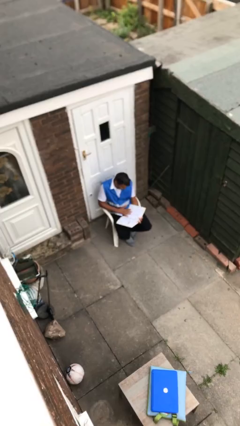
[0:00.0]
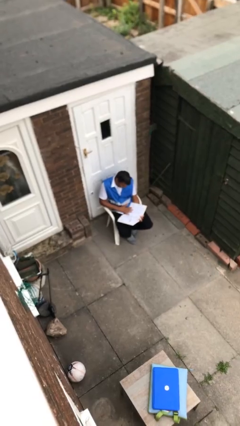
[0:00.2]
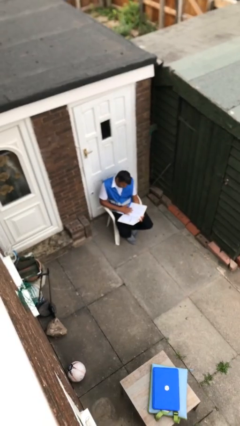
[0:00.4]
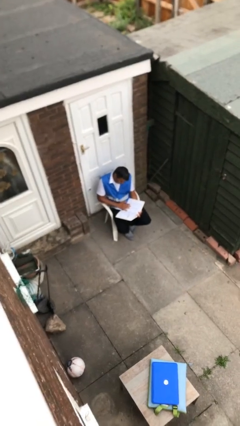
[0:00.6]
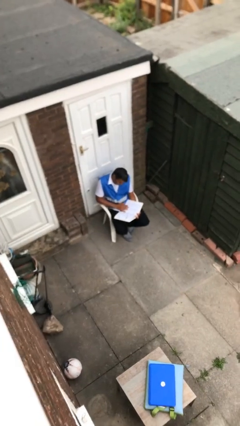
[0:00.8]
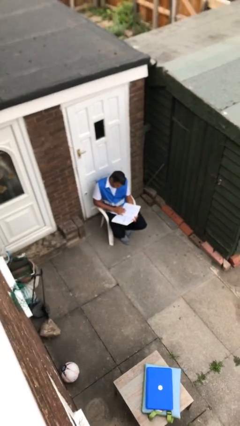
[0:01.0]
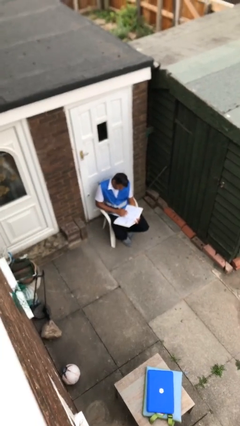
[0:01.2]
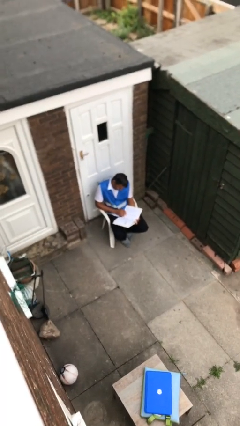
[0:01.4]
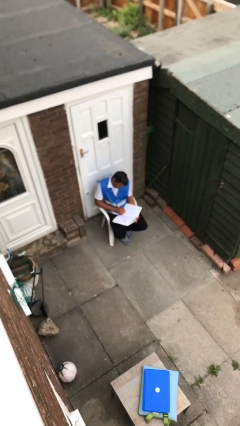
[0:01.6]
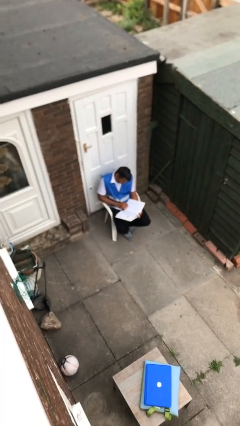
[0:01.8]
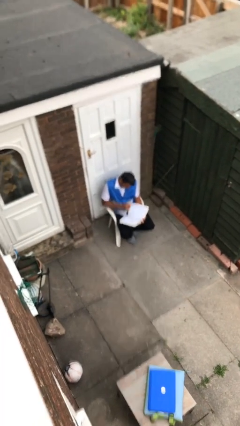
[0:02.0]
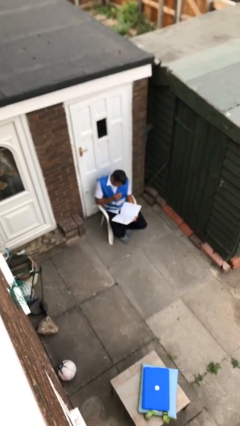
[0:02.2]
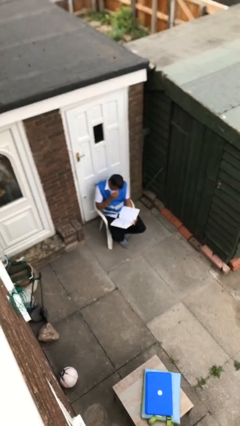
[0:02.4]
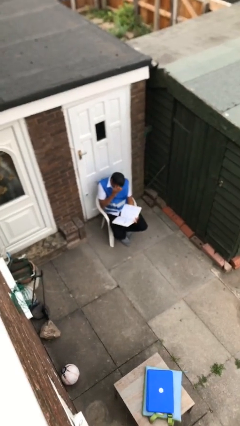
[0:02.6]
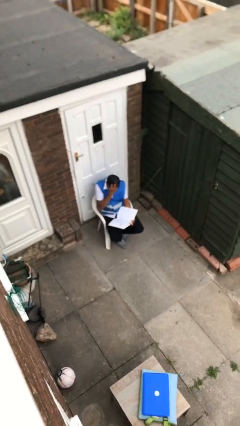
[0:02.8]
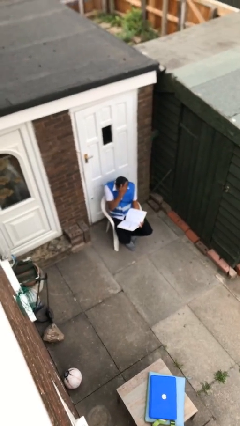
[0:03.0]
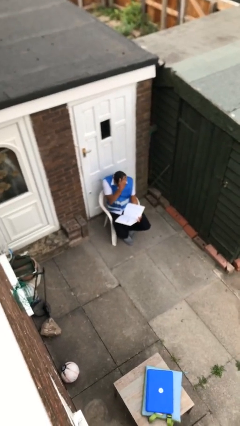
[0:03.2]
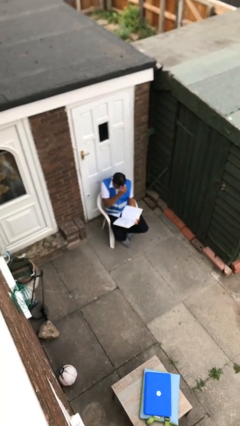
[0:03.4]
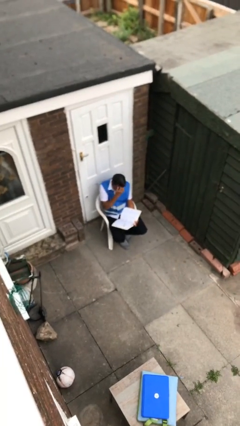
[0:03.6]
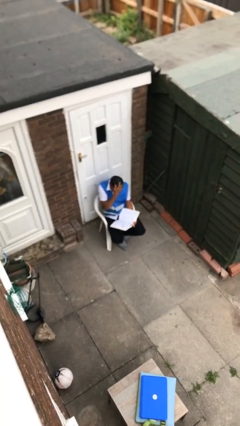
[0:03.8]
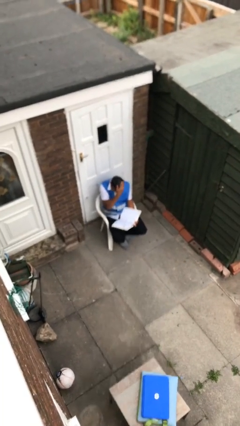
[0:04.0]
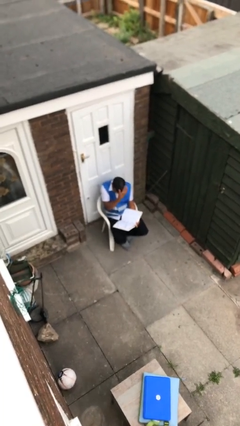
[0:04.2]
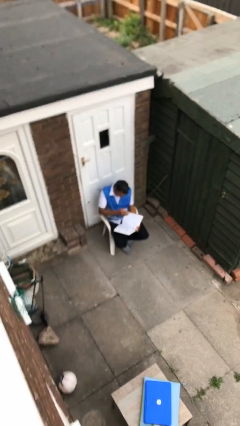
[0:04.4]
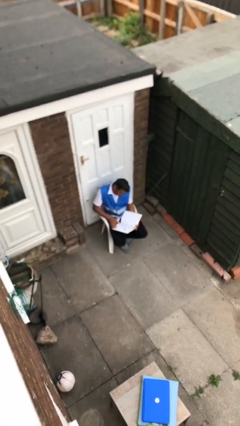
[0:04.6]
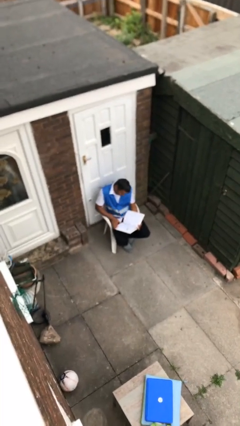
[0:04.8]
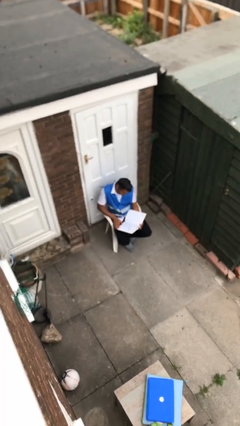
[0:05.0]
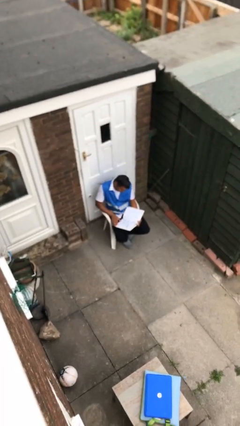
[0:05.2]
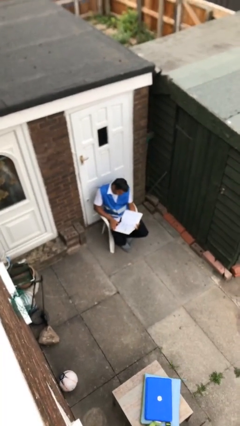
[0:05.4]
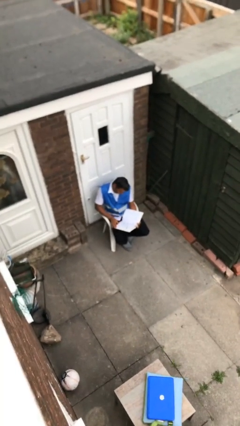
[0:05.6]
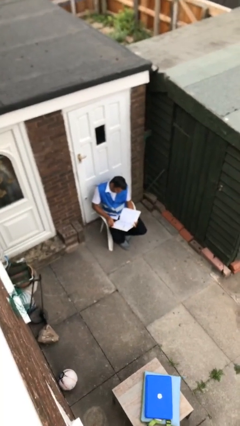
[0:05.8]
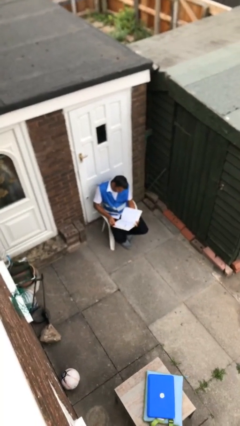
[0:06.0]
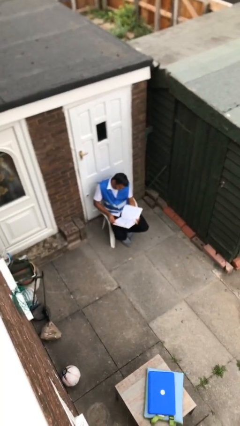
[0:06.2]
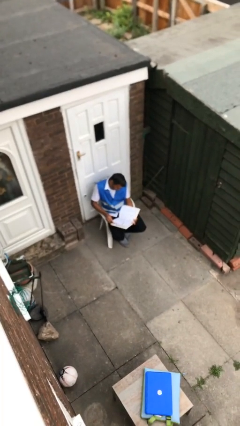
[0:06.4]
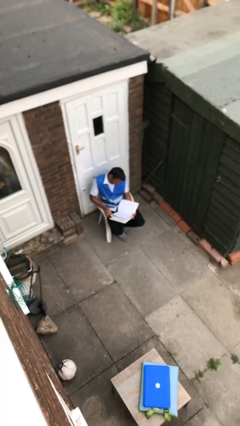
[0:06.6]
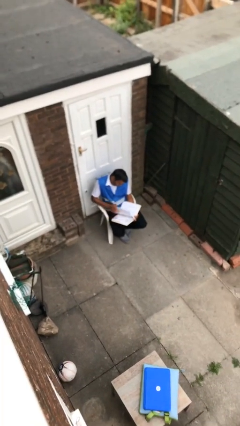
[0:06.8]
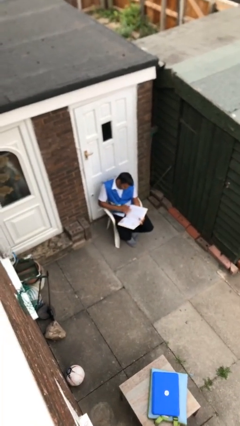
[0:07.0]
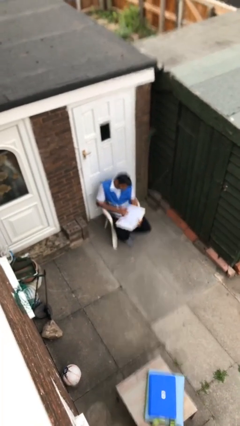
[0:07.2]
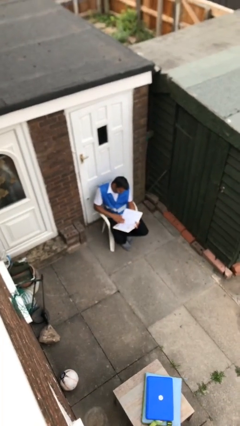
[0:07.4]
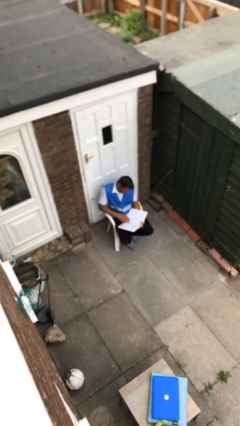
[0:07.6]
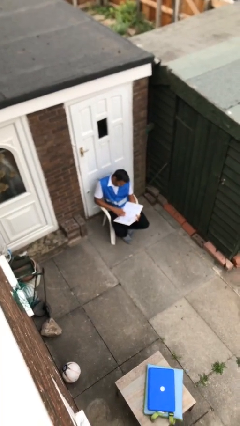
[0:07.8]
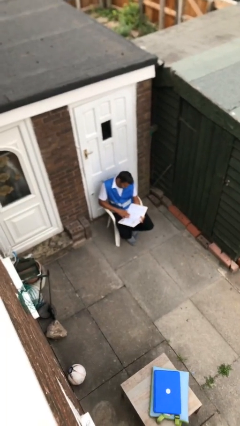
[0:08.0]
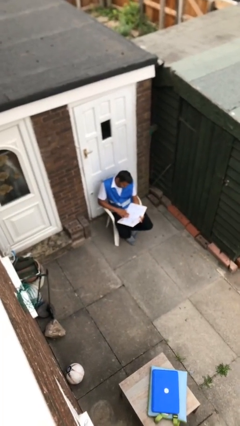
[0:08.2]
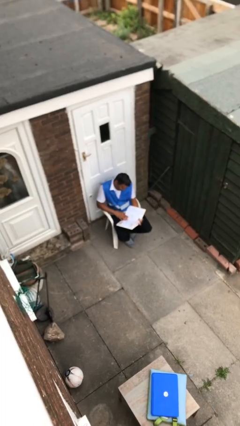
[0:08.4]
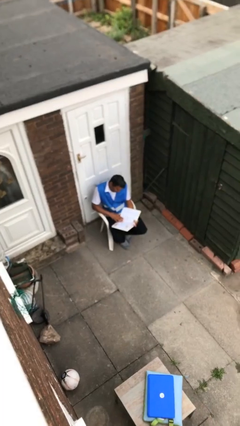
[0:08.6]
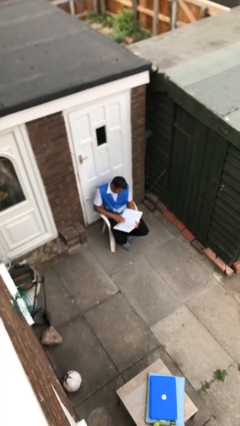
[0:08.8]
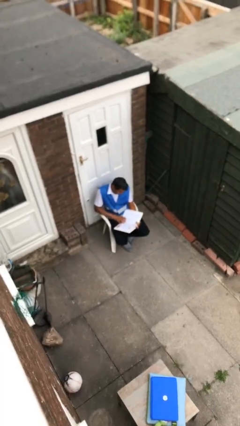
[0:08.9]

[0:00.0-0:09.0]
person reads document

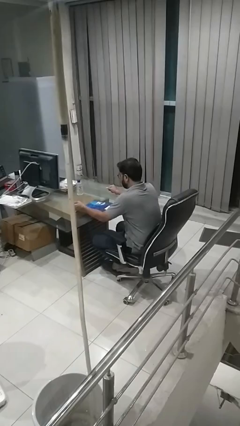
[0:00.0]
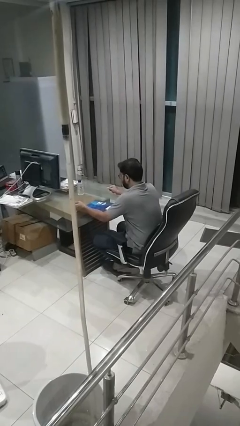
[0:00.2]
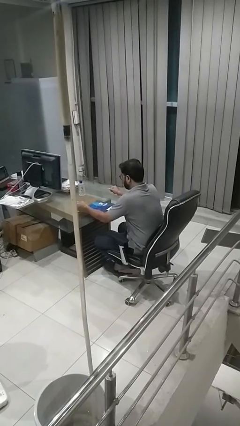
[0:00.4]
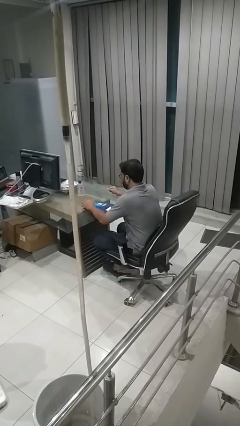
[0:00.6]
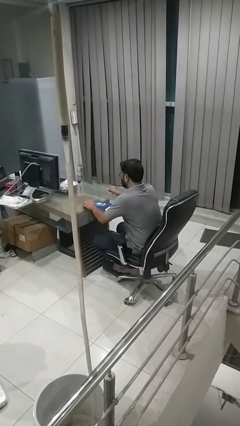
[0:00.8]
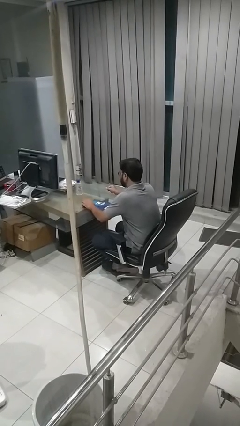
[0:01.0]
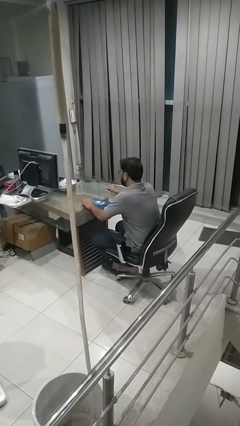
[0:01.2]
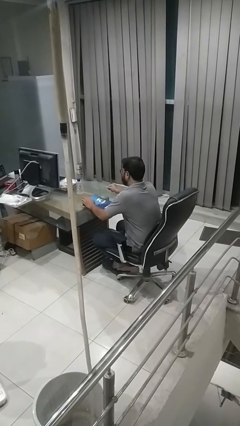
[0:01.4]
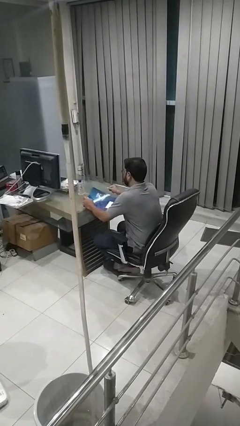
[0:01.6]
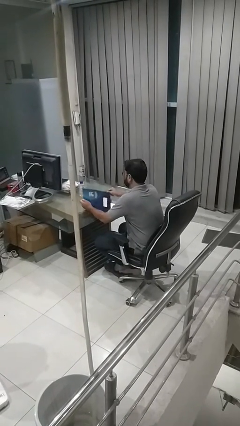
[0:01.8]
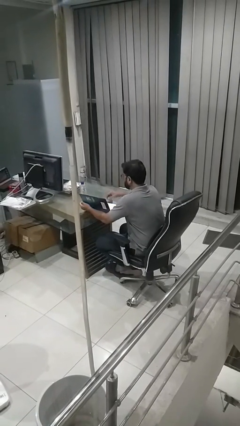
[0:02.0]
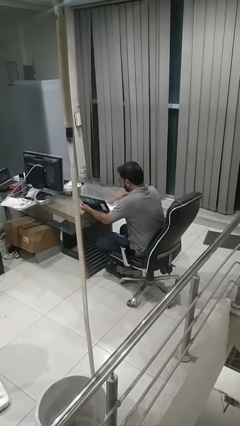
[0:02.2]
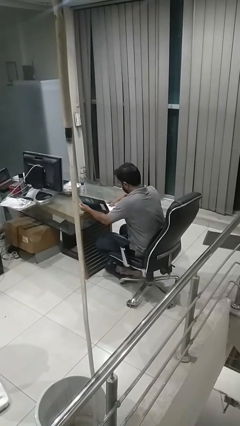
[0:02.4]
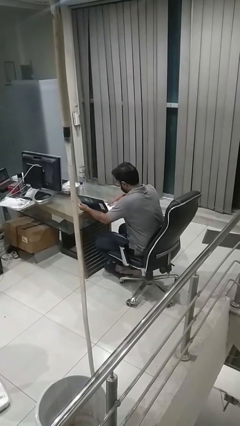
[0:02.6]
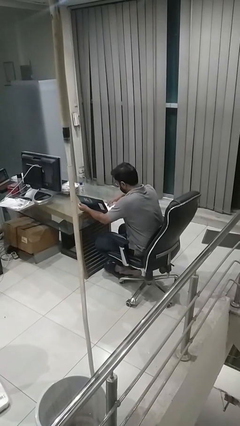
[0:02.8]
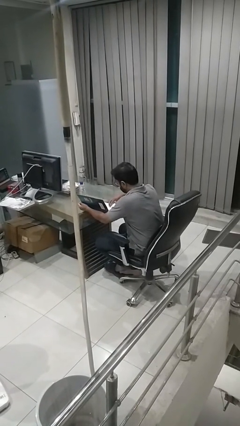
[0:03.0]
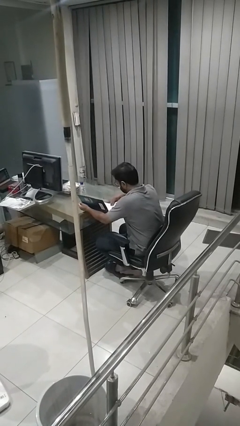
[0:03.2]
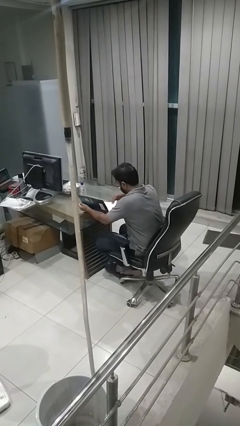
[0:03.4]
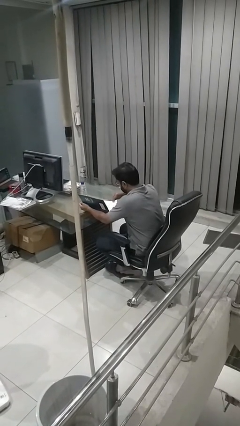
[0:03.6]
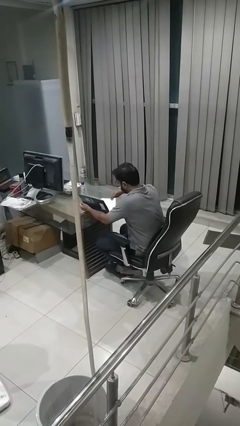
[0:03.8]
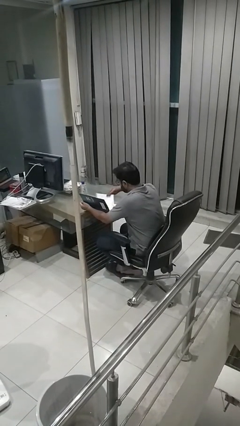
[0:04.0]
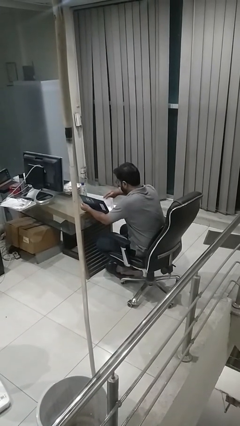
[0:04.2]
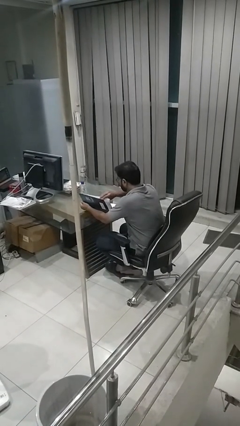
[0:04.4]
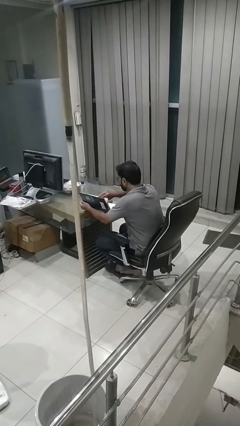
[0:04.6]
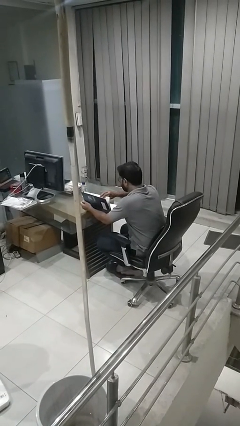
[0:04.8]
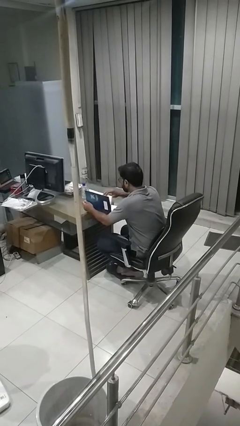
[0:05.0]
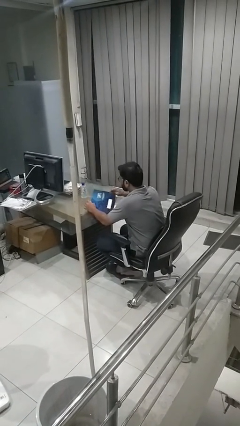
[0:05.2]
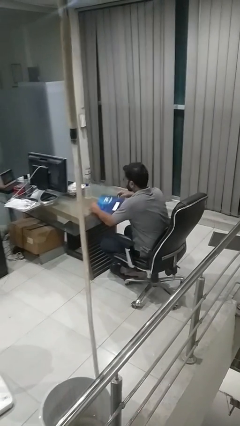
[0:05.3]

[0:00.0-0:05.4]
person reads magazine

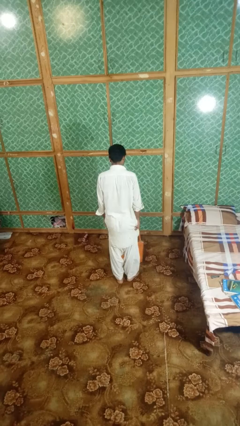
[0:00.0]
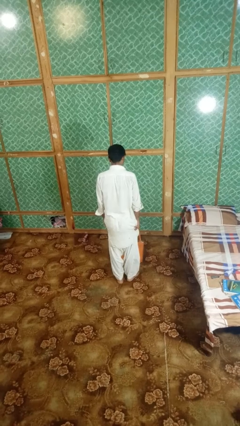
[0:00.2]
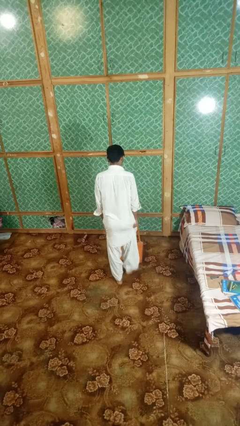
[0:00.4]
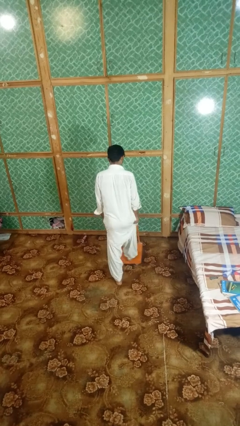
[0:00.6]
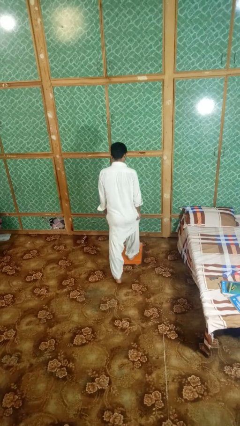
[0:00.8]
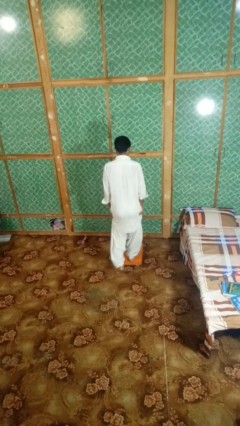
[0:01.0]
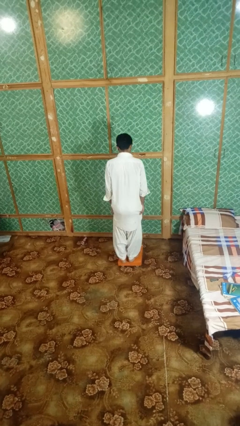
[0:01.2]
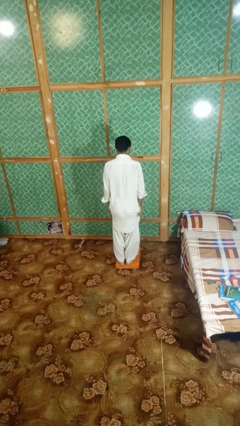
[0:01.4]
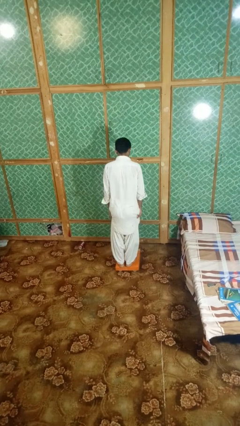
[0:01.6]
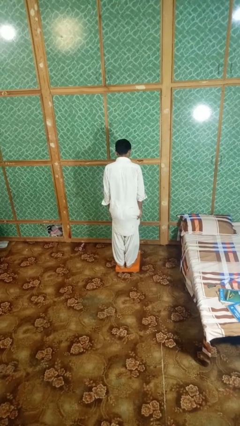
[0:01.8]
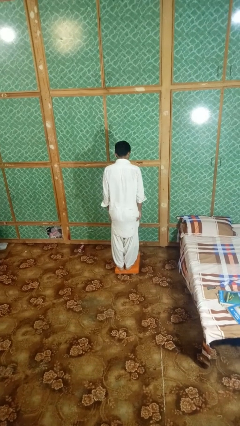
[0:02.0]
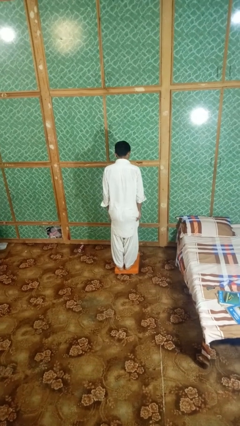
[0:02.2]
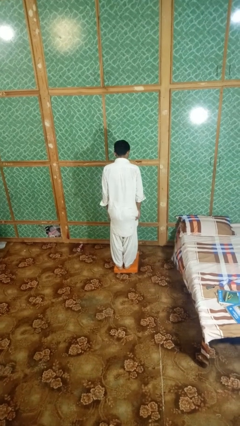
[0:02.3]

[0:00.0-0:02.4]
person uses bodyweight scale

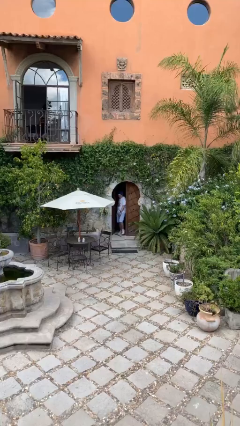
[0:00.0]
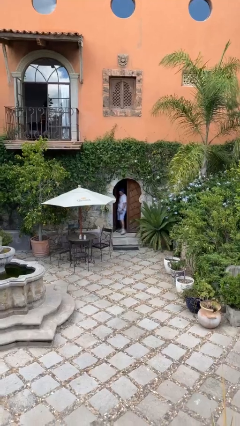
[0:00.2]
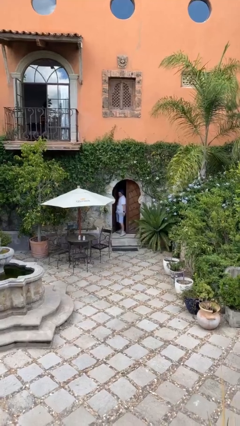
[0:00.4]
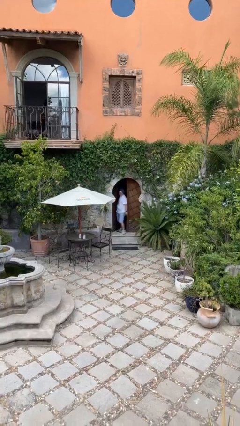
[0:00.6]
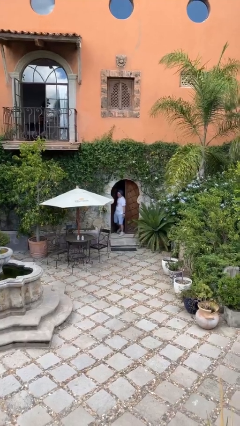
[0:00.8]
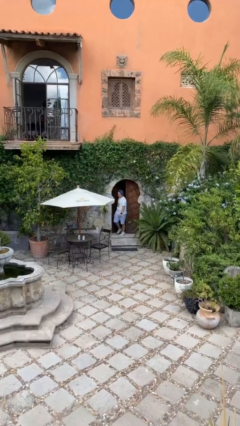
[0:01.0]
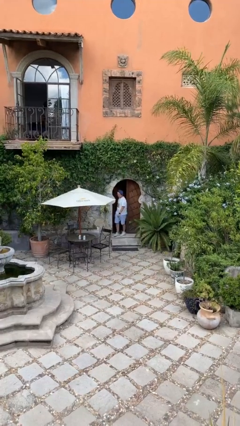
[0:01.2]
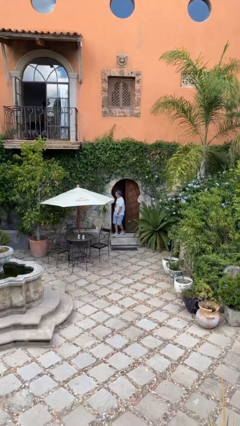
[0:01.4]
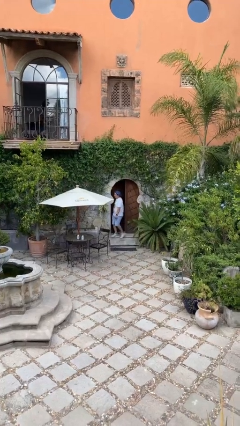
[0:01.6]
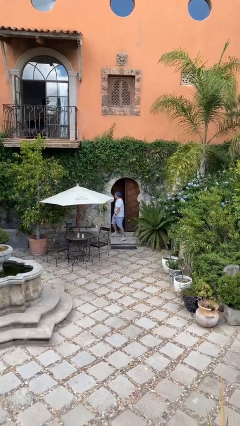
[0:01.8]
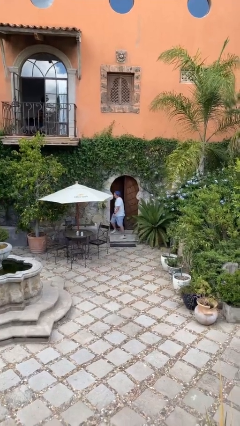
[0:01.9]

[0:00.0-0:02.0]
person enters scene through structure
